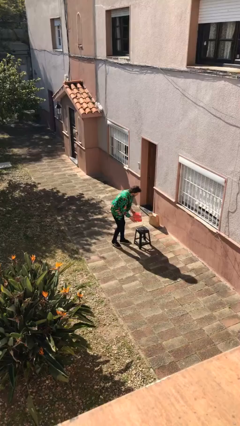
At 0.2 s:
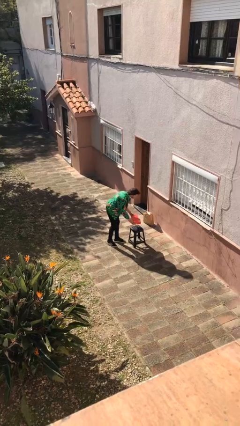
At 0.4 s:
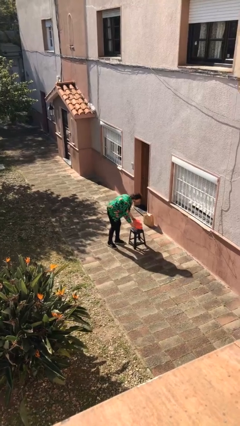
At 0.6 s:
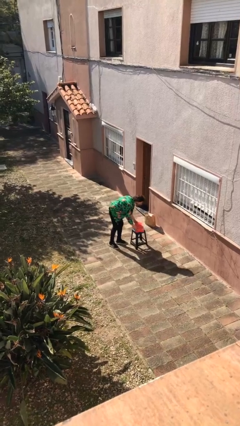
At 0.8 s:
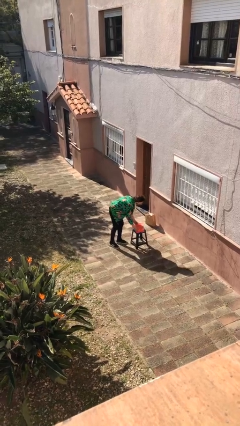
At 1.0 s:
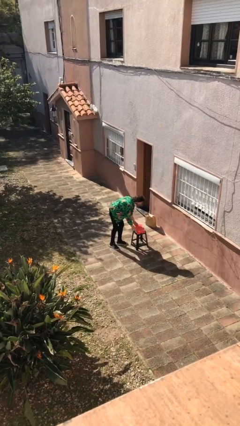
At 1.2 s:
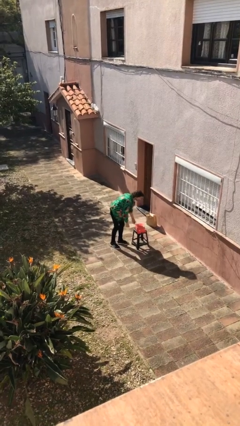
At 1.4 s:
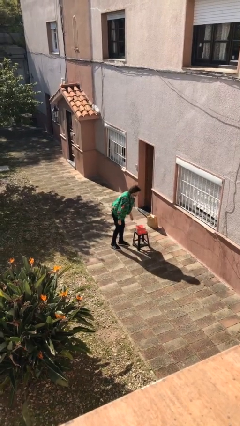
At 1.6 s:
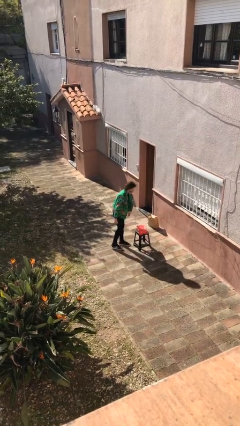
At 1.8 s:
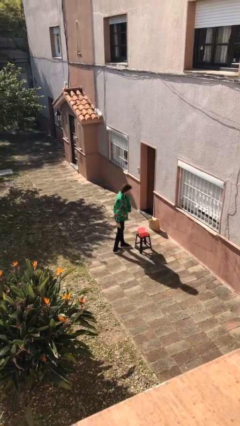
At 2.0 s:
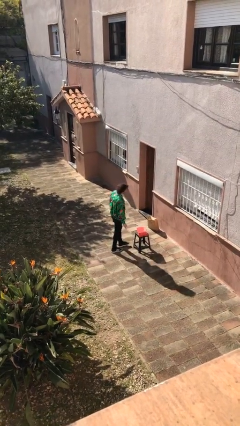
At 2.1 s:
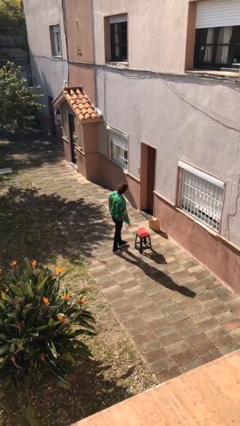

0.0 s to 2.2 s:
person puts down object on table

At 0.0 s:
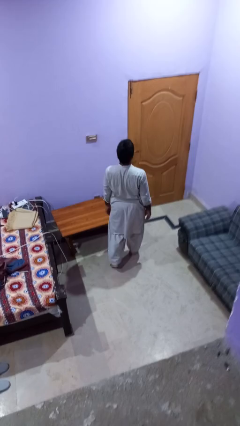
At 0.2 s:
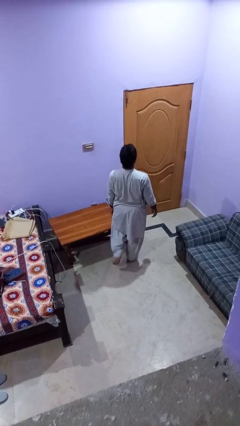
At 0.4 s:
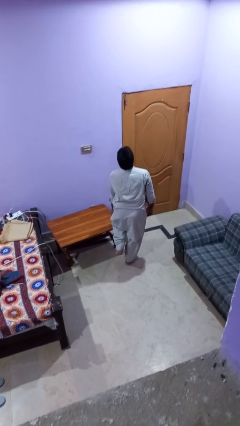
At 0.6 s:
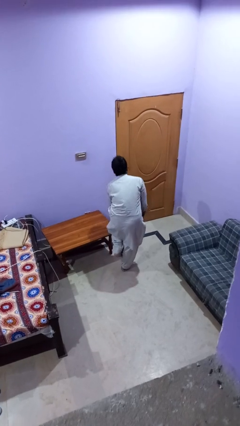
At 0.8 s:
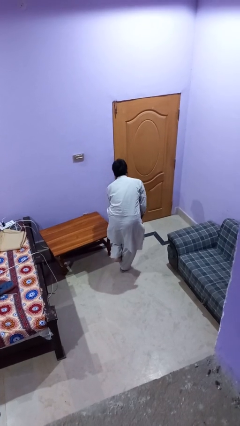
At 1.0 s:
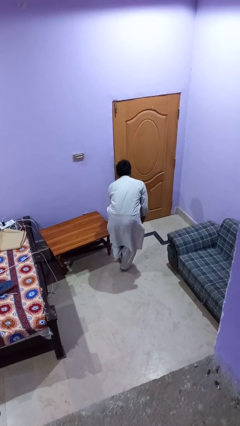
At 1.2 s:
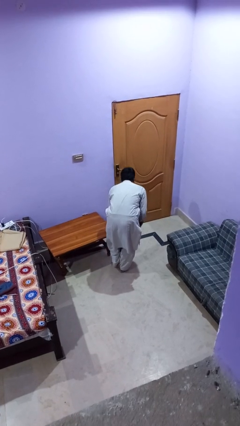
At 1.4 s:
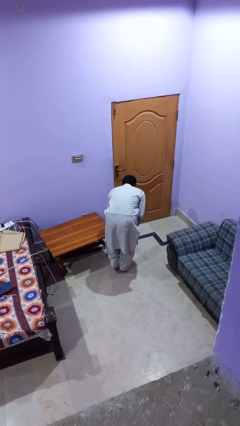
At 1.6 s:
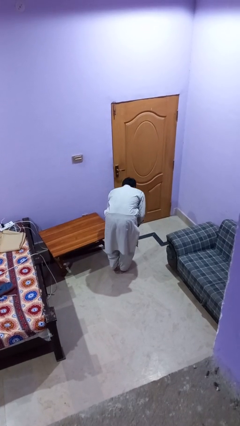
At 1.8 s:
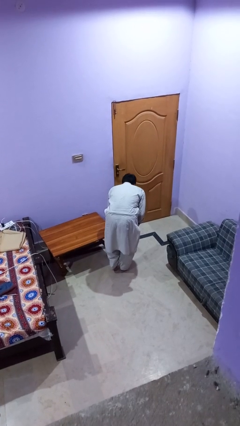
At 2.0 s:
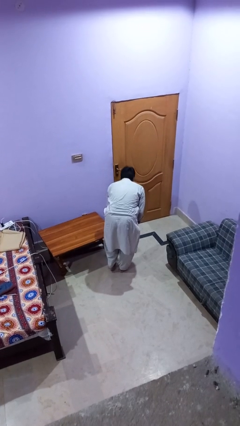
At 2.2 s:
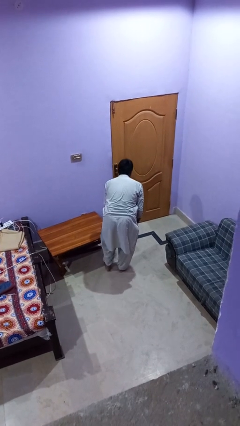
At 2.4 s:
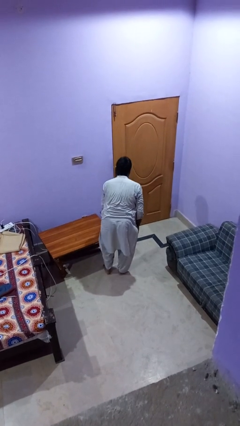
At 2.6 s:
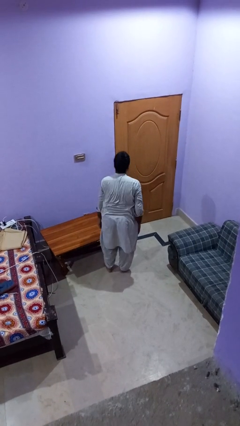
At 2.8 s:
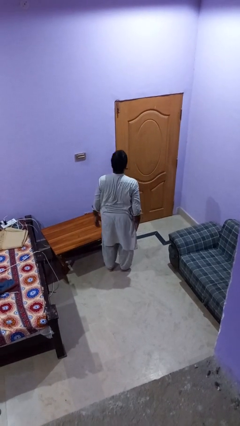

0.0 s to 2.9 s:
person bumps into table

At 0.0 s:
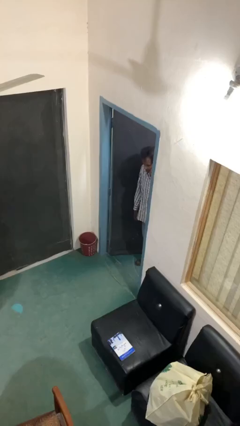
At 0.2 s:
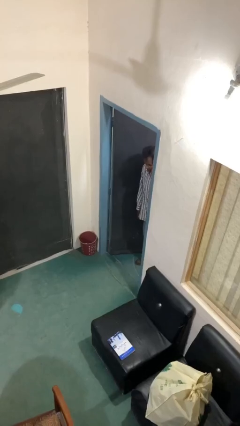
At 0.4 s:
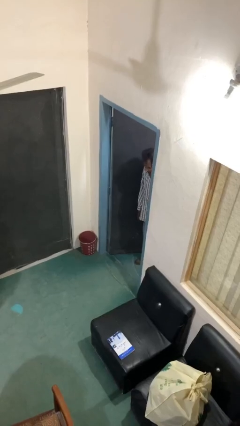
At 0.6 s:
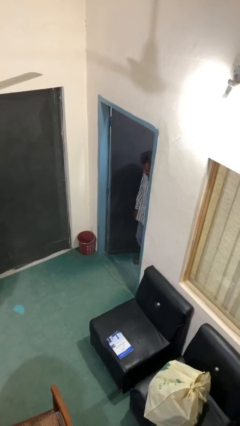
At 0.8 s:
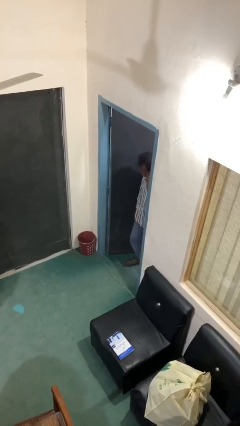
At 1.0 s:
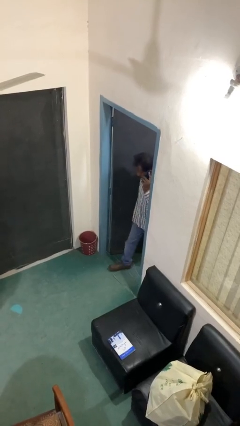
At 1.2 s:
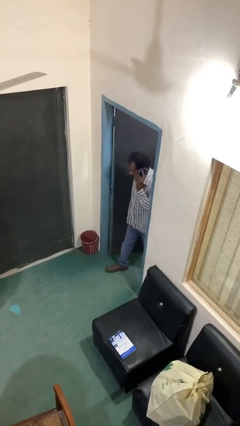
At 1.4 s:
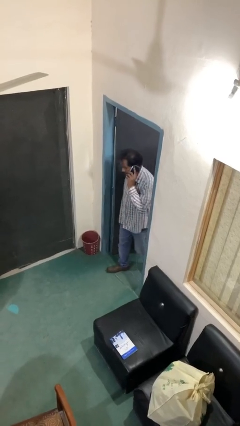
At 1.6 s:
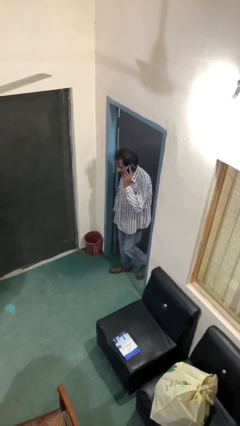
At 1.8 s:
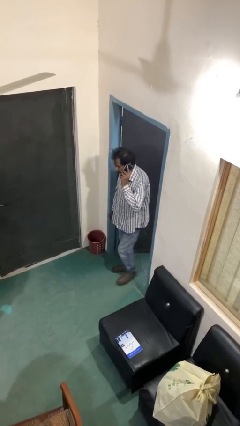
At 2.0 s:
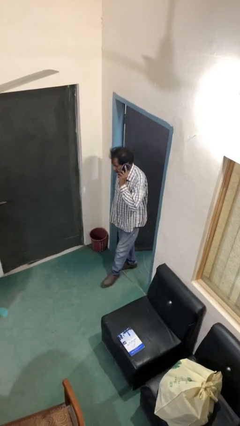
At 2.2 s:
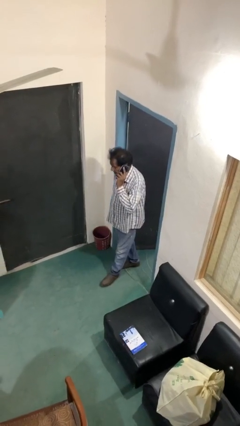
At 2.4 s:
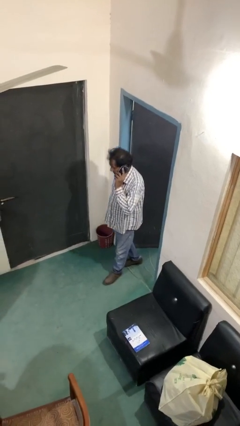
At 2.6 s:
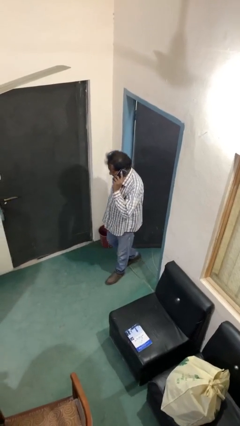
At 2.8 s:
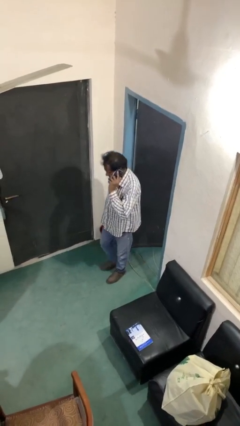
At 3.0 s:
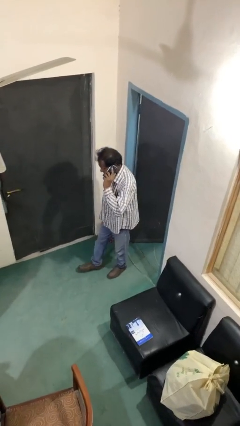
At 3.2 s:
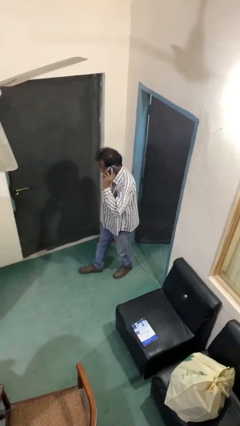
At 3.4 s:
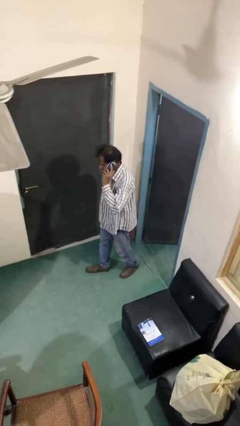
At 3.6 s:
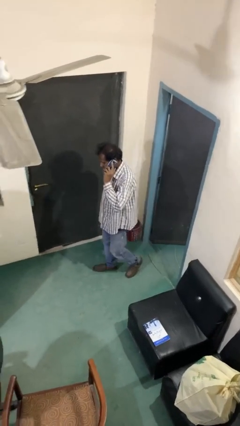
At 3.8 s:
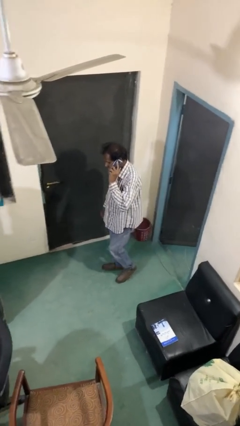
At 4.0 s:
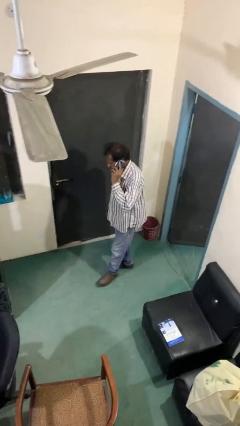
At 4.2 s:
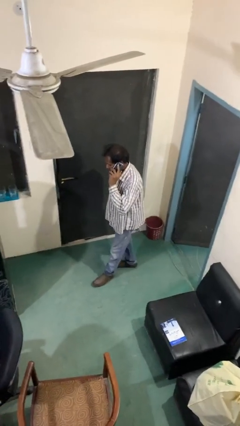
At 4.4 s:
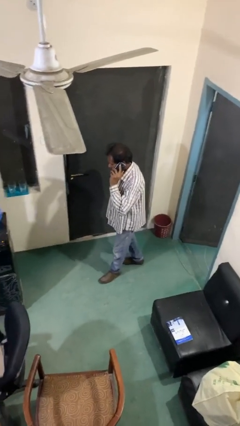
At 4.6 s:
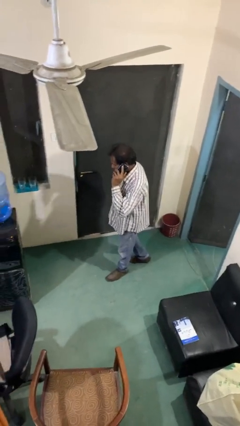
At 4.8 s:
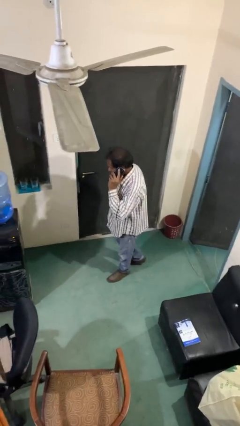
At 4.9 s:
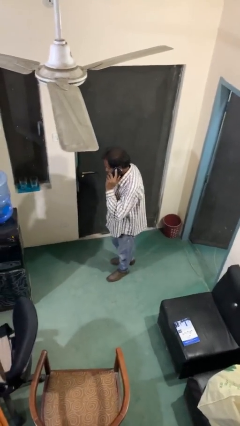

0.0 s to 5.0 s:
person enters scene through structure

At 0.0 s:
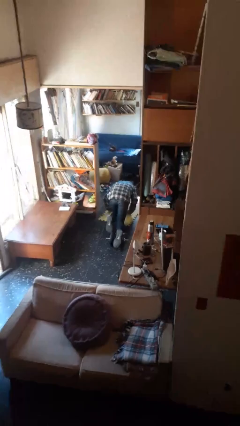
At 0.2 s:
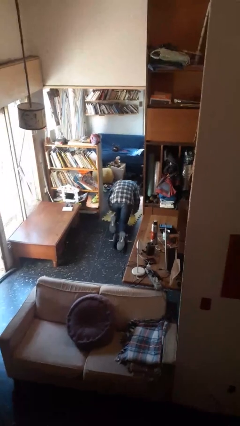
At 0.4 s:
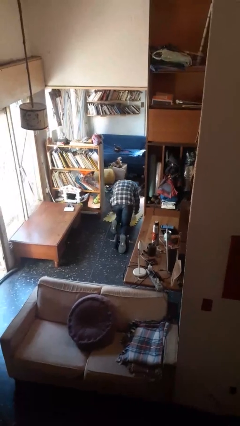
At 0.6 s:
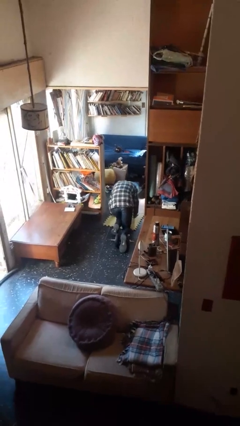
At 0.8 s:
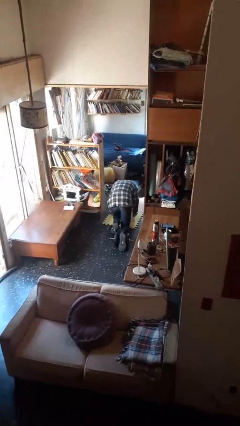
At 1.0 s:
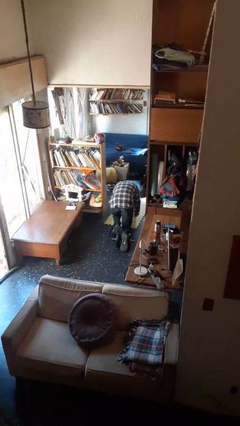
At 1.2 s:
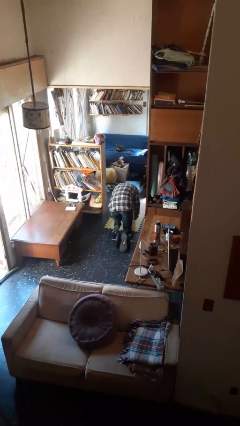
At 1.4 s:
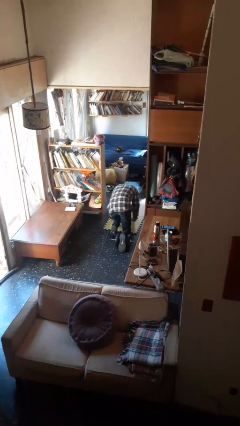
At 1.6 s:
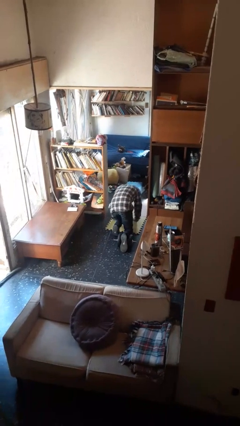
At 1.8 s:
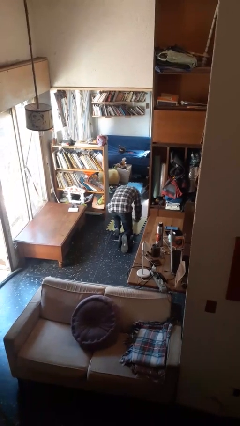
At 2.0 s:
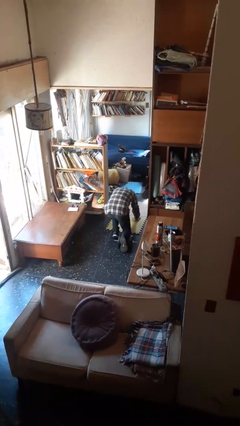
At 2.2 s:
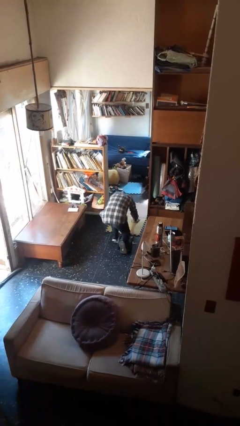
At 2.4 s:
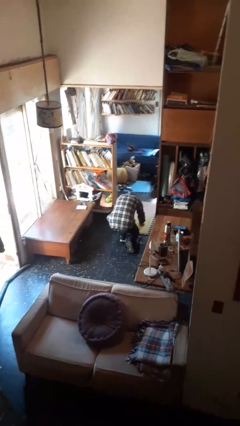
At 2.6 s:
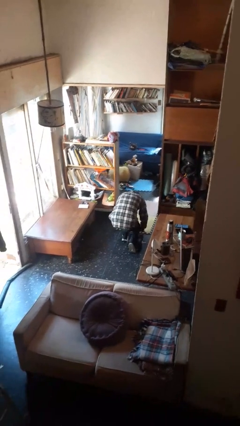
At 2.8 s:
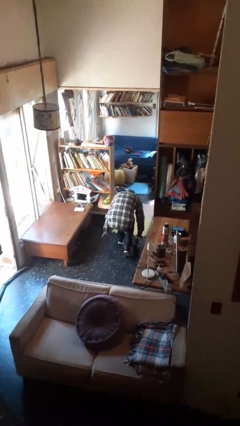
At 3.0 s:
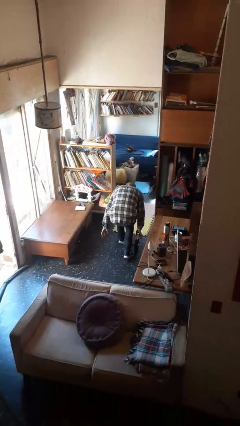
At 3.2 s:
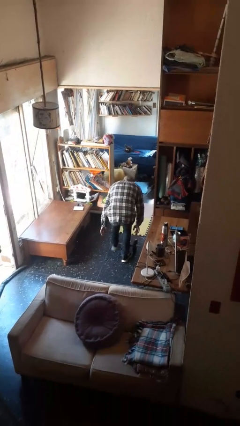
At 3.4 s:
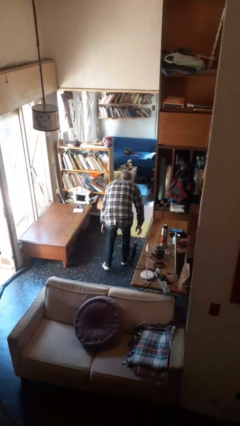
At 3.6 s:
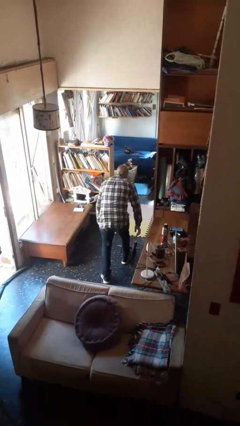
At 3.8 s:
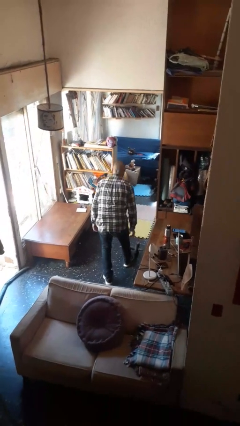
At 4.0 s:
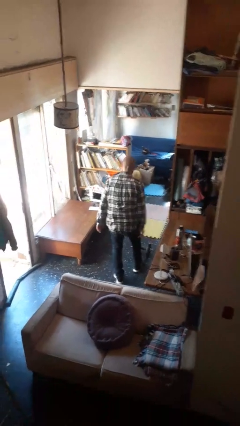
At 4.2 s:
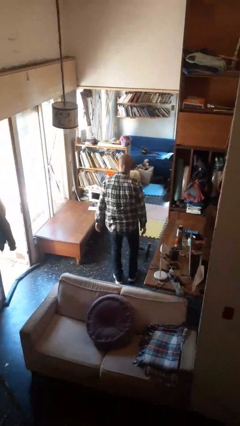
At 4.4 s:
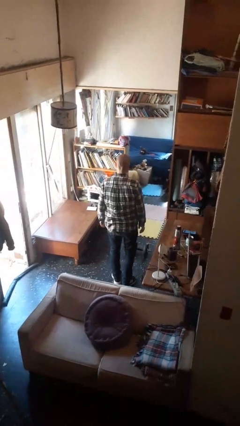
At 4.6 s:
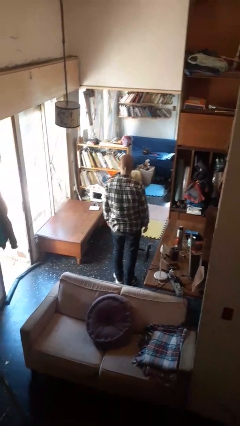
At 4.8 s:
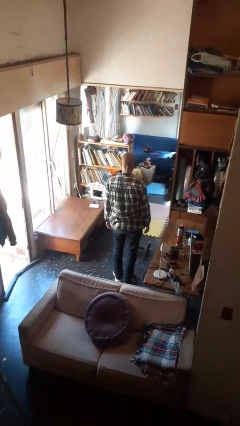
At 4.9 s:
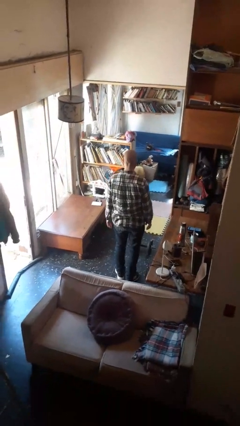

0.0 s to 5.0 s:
person stands up from floor

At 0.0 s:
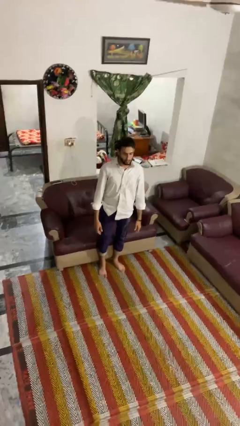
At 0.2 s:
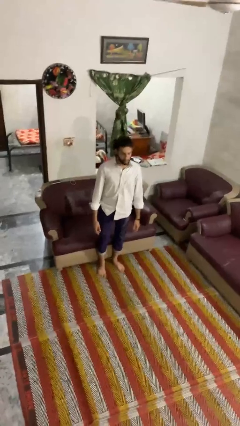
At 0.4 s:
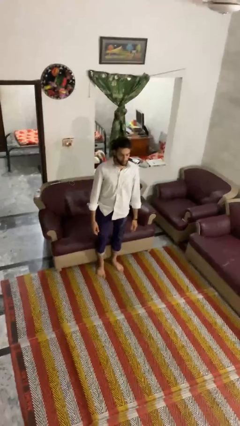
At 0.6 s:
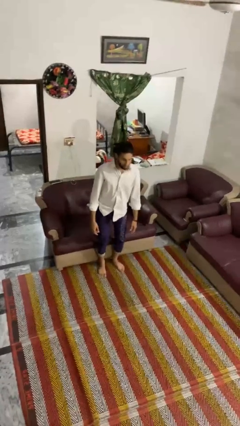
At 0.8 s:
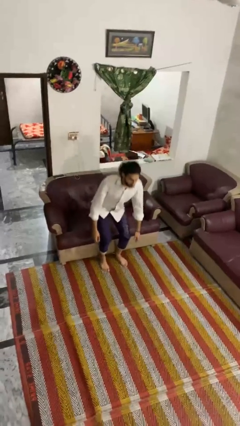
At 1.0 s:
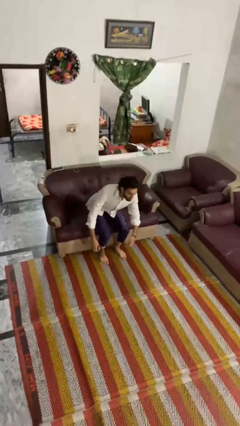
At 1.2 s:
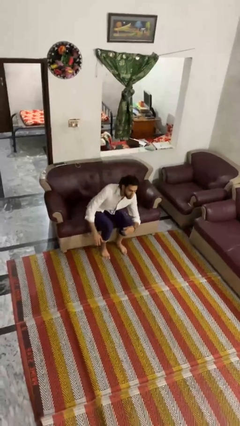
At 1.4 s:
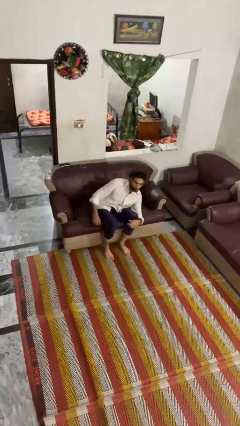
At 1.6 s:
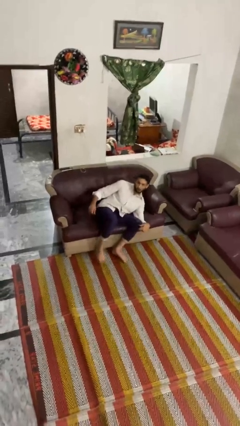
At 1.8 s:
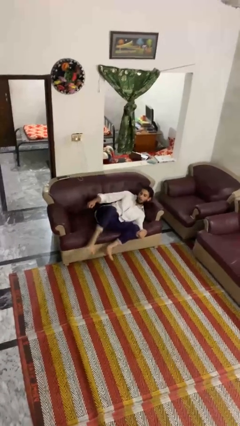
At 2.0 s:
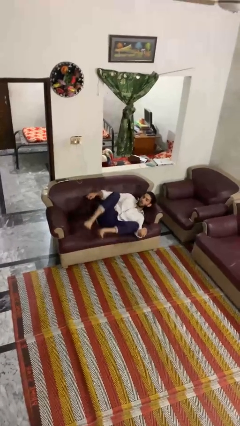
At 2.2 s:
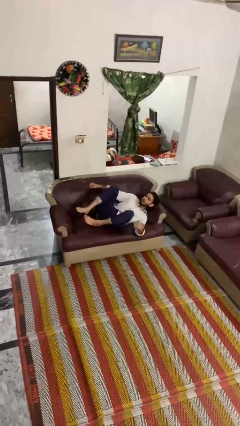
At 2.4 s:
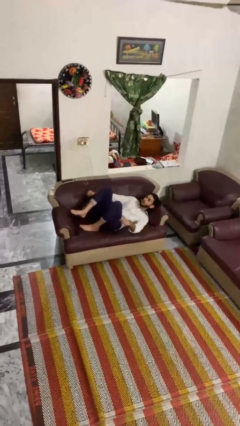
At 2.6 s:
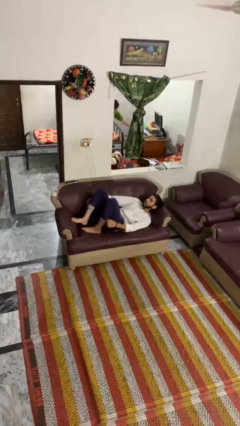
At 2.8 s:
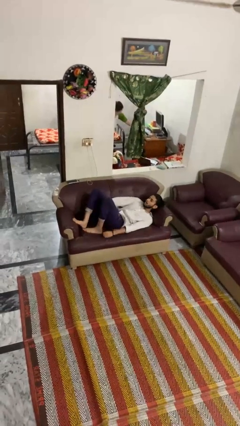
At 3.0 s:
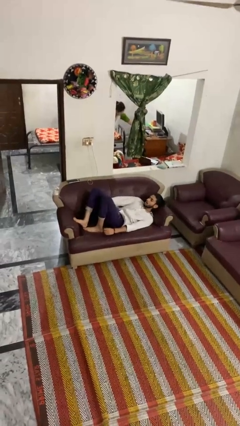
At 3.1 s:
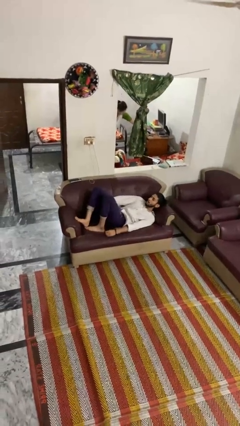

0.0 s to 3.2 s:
person lies down on couch
